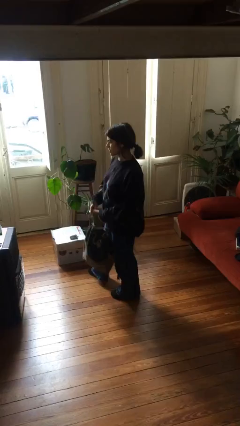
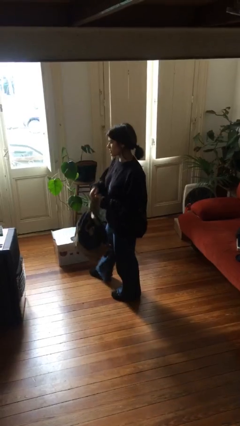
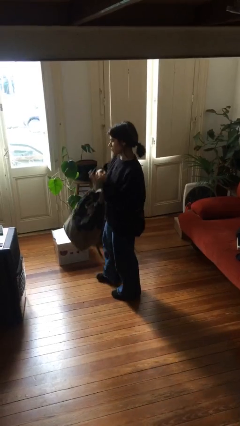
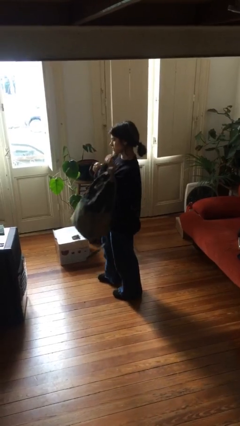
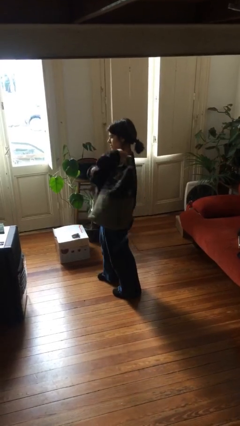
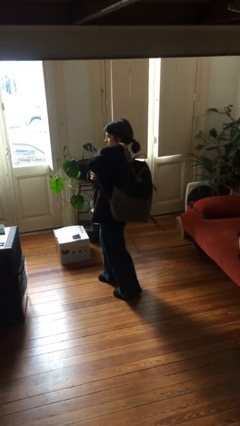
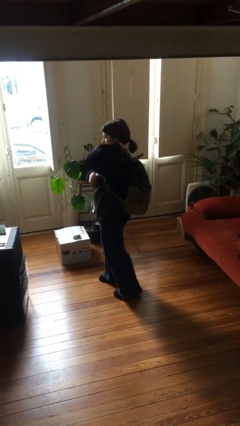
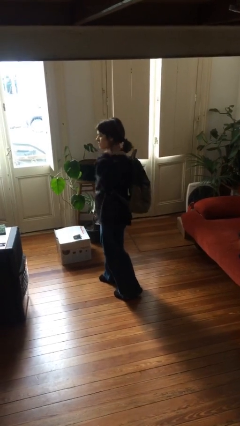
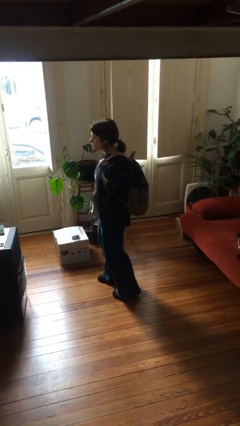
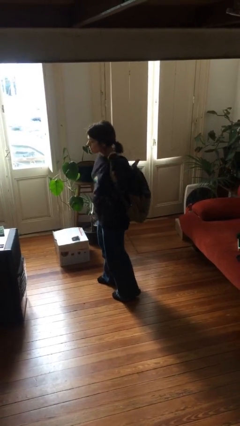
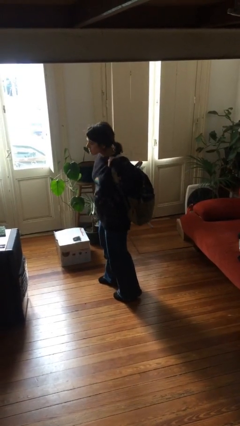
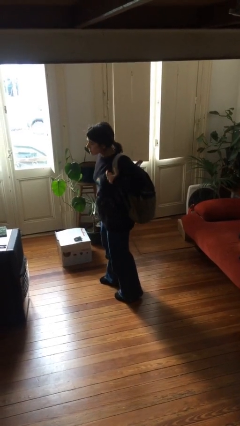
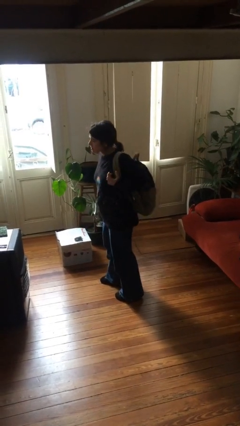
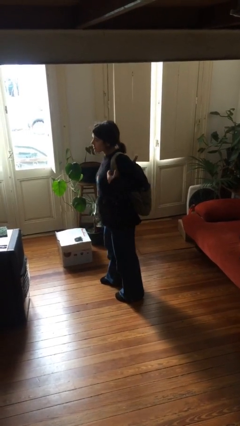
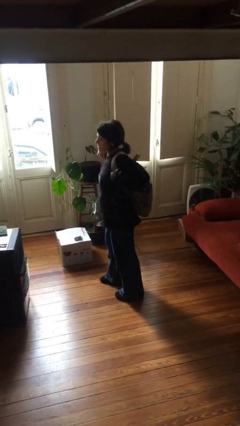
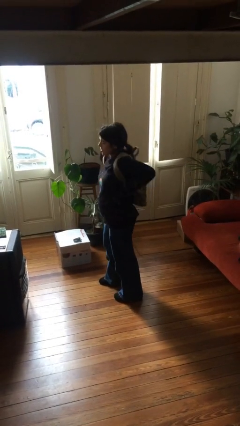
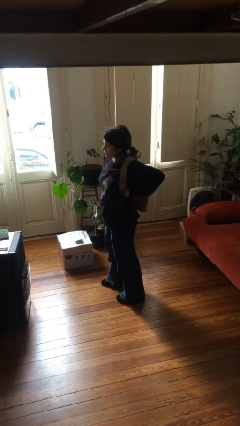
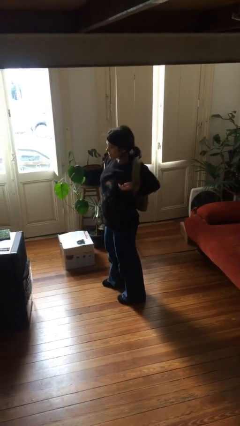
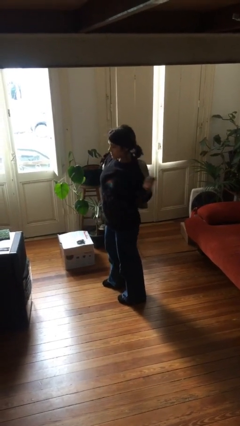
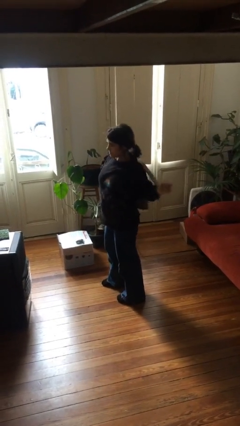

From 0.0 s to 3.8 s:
person puts on backpack

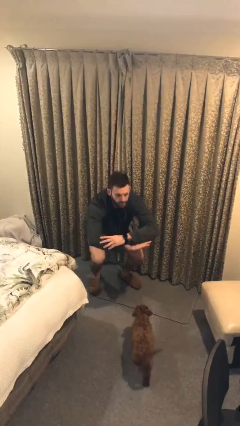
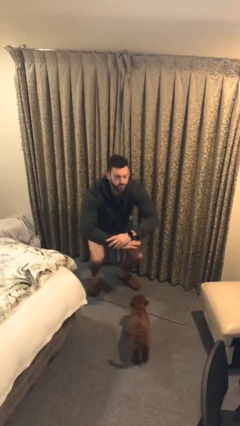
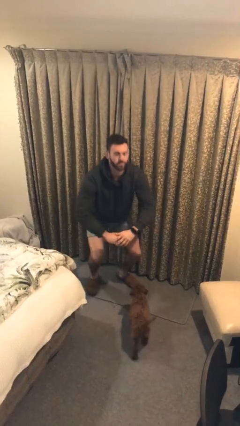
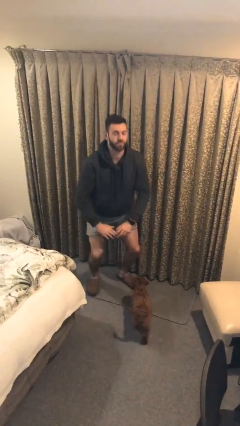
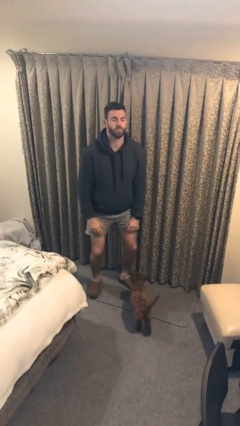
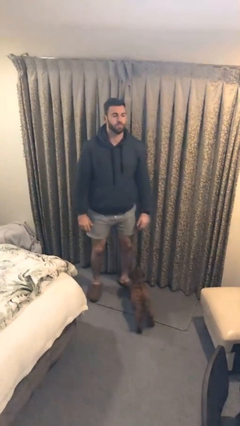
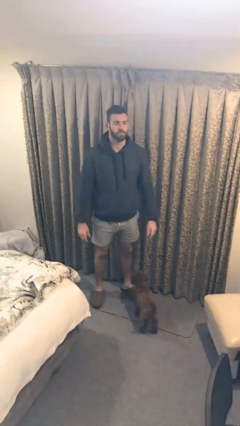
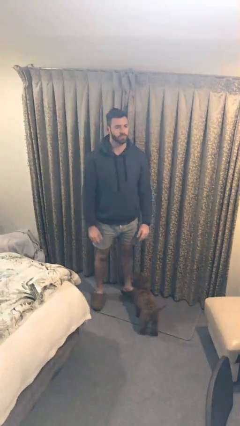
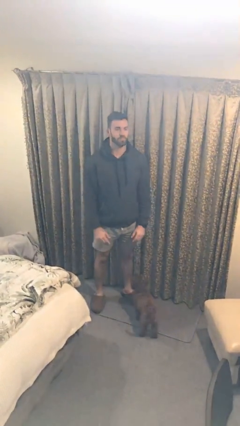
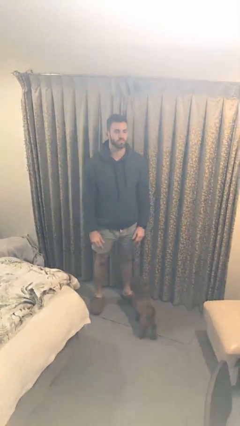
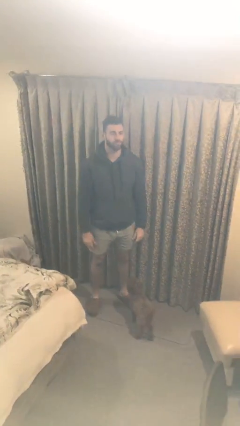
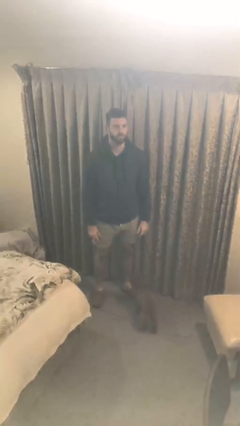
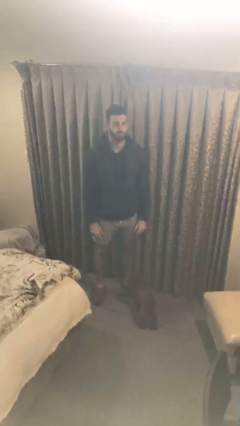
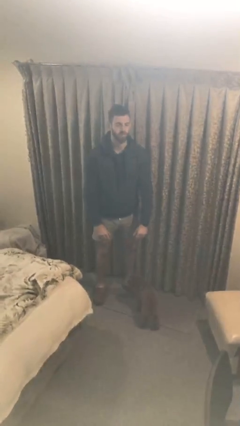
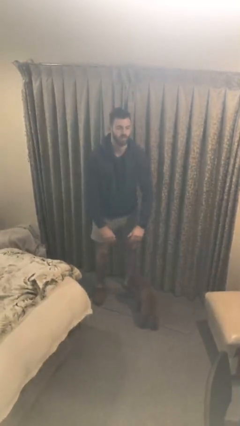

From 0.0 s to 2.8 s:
person stands up

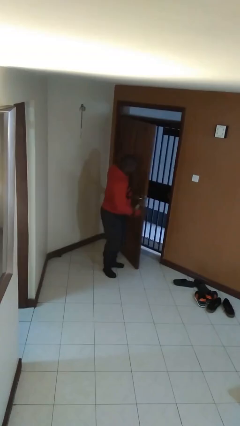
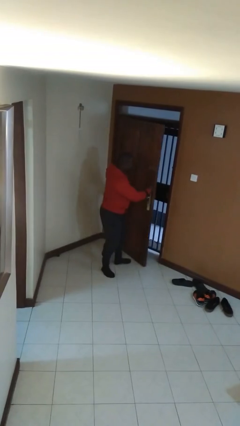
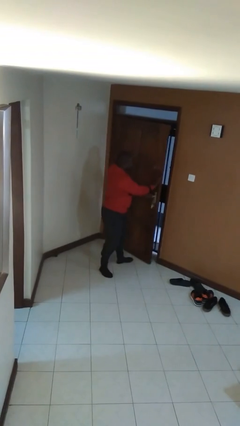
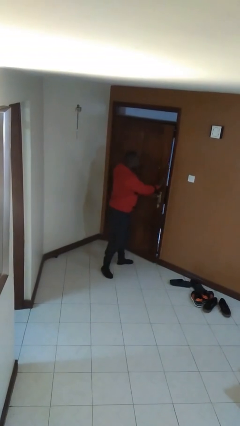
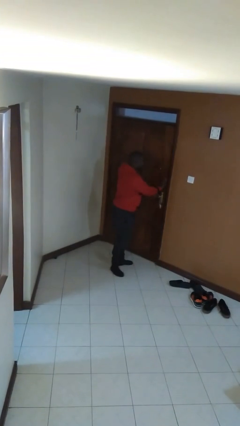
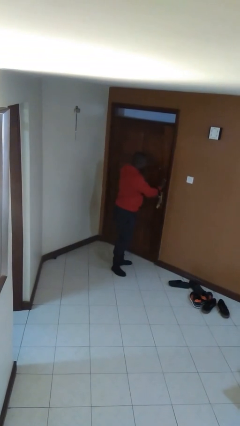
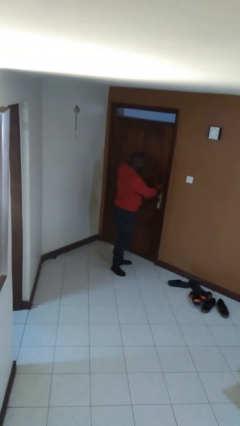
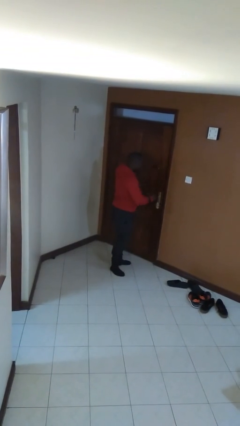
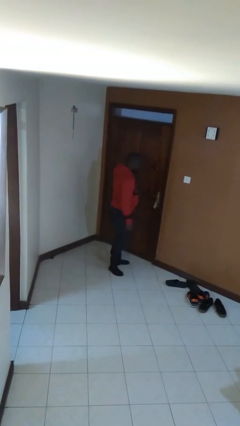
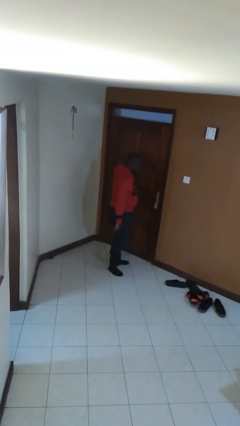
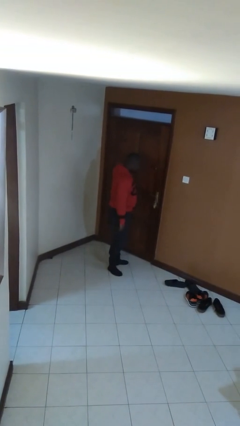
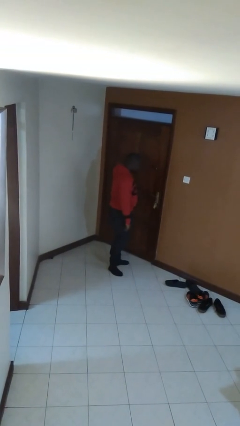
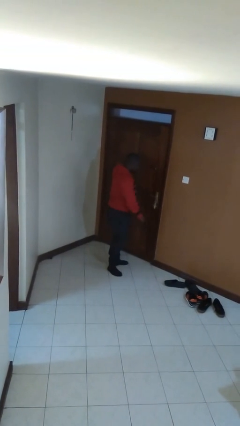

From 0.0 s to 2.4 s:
person closes facility door

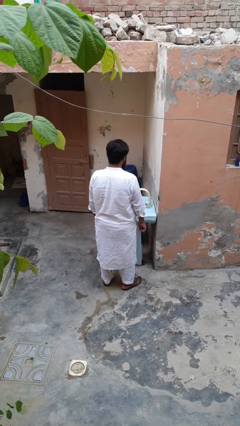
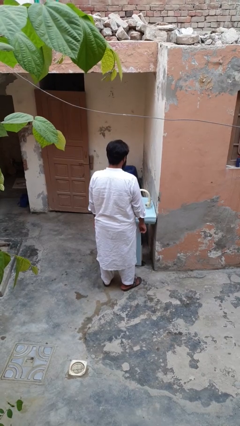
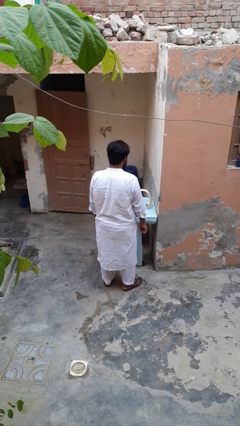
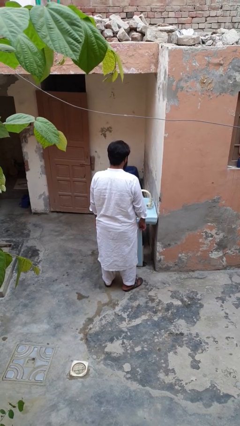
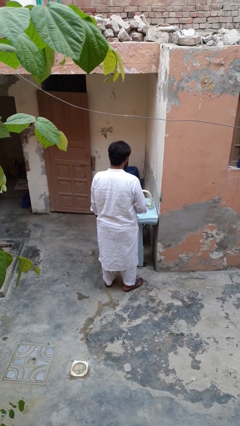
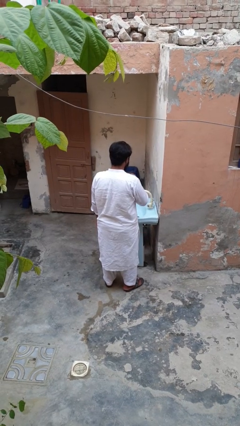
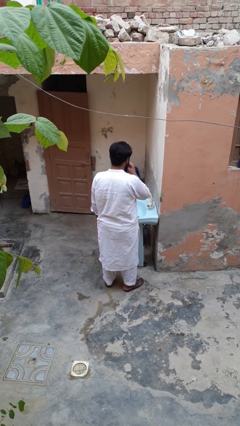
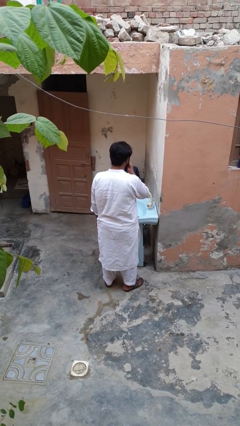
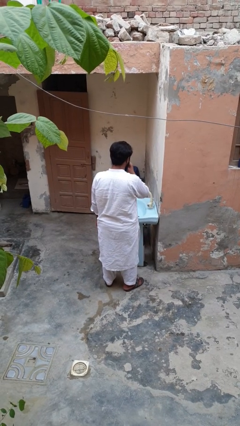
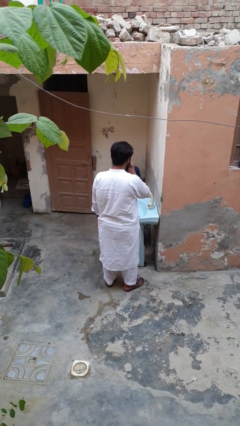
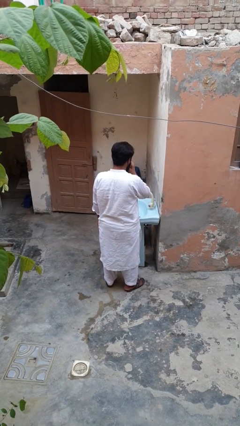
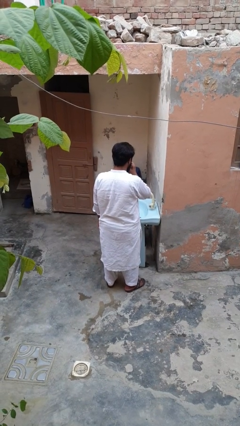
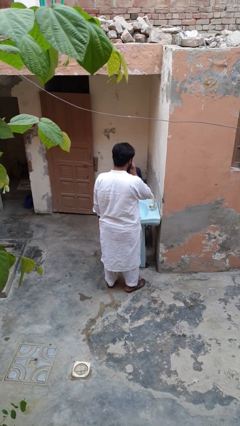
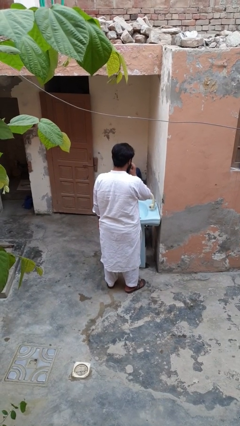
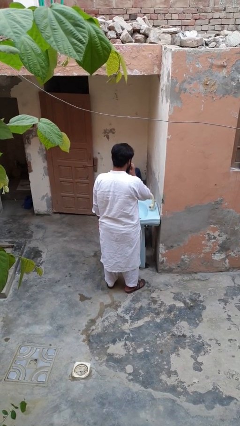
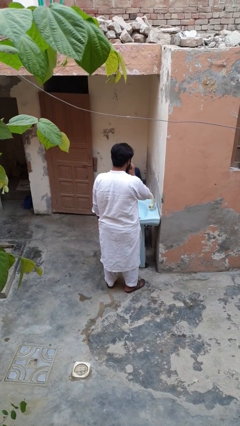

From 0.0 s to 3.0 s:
person flosses

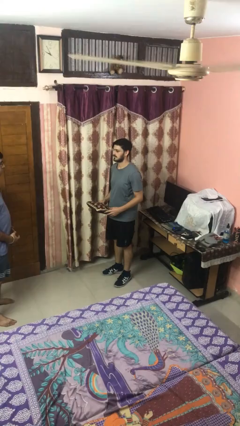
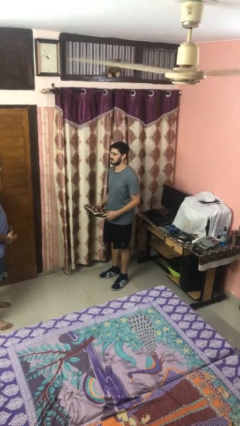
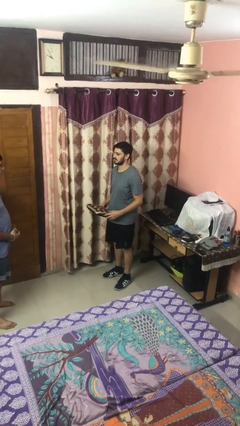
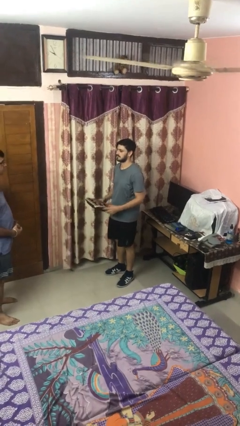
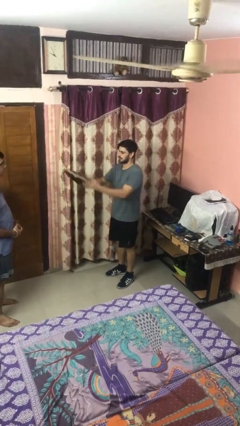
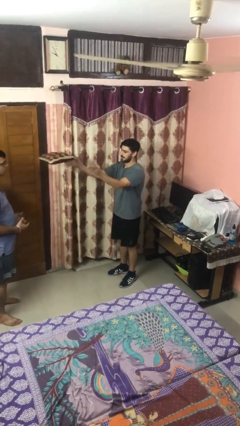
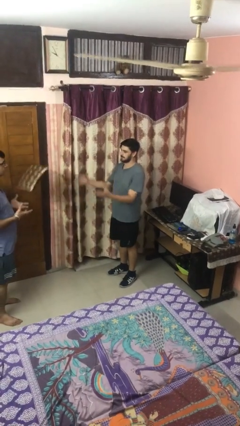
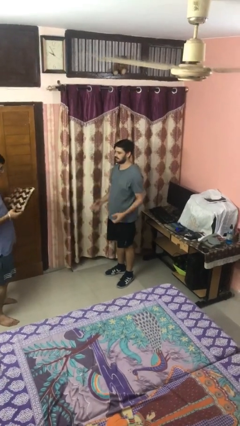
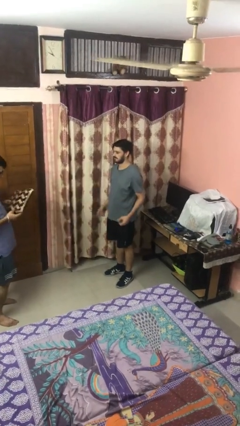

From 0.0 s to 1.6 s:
person throws object to person

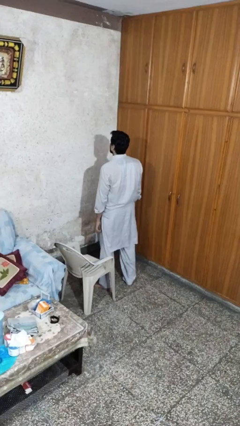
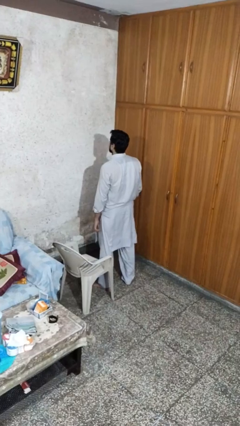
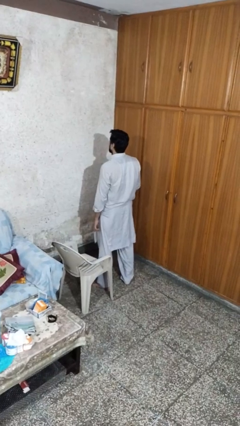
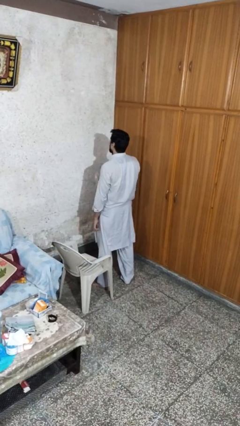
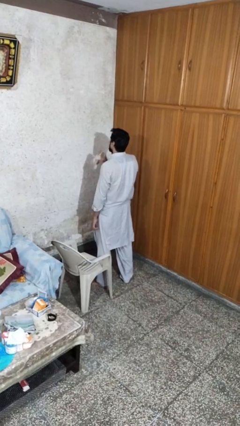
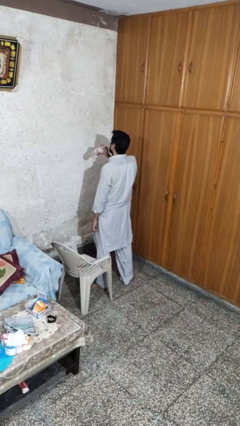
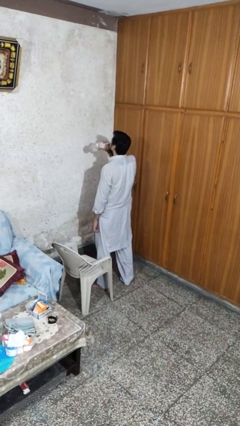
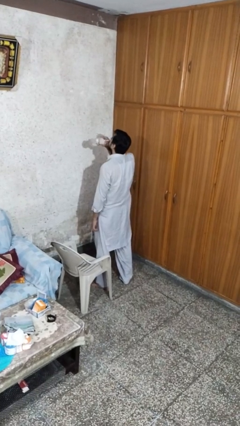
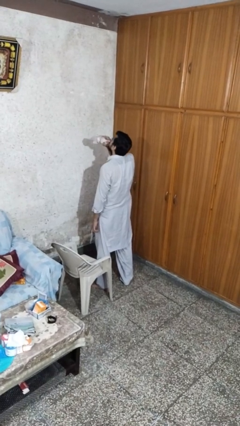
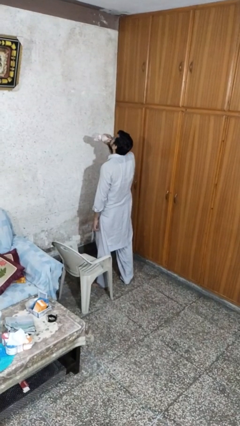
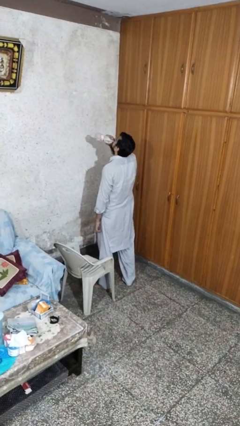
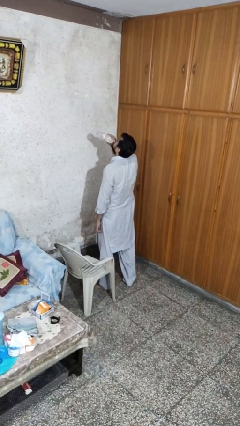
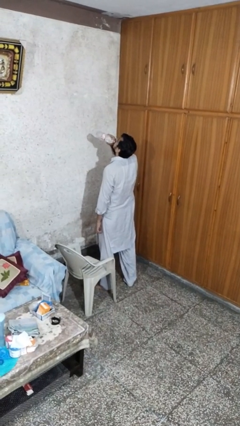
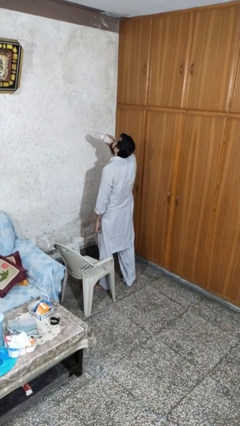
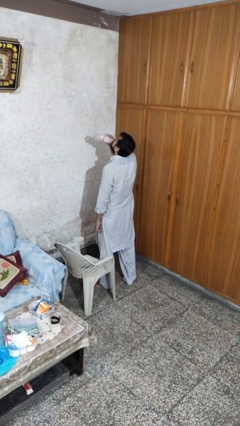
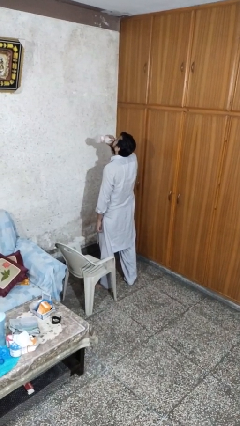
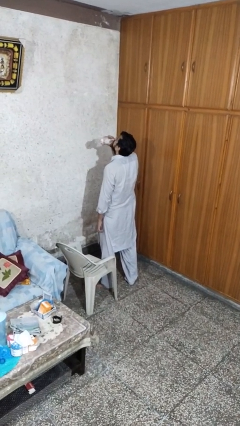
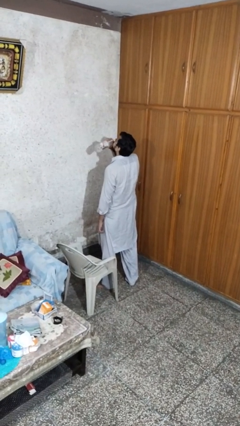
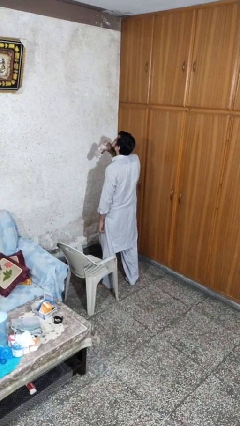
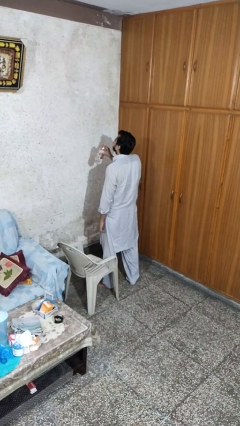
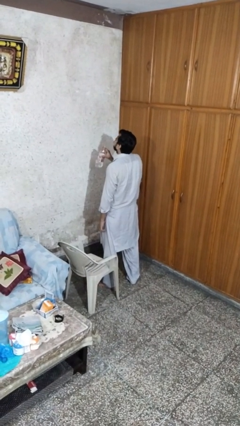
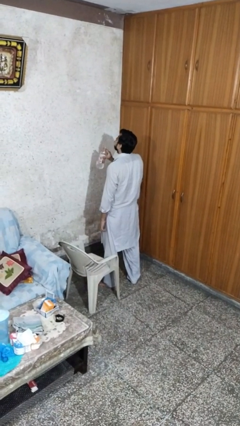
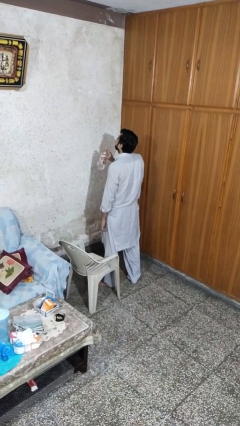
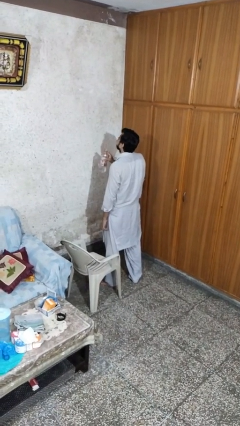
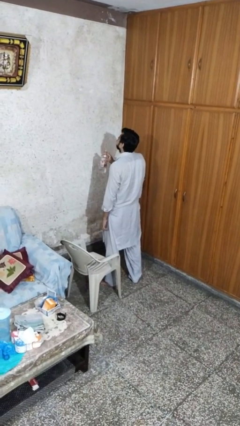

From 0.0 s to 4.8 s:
person drinks from bottle
